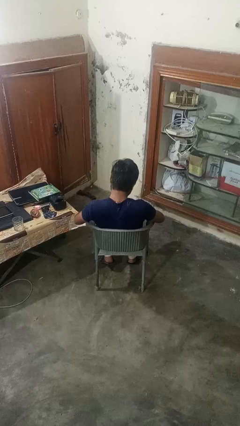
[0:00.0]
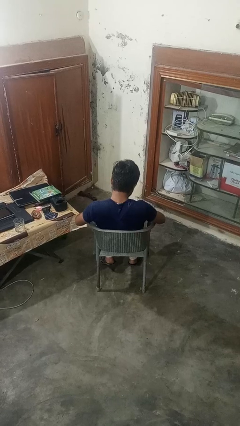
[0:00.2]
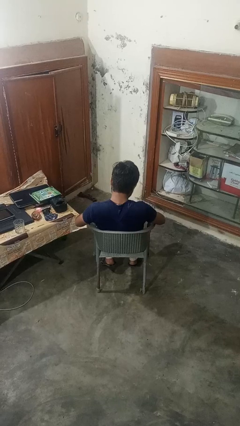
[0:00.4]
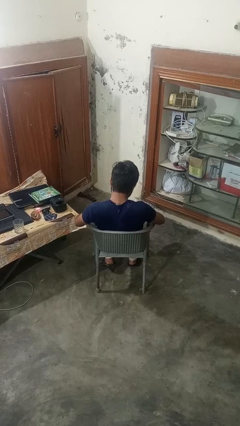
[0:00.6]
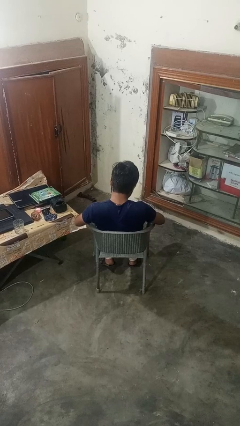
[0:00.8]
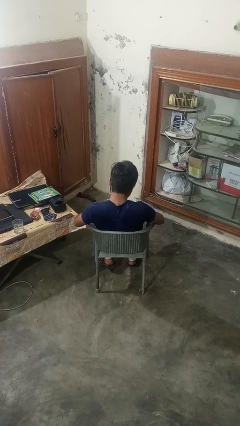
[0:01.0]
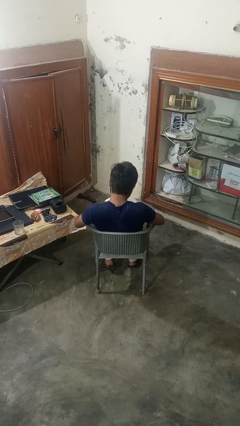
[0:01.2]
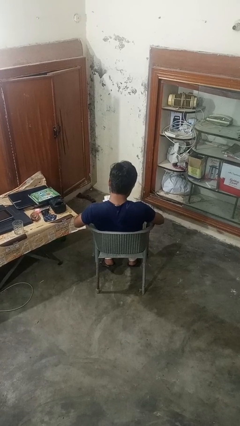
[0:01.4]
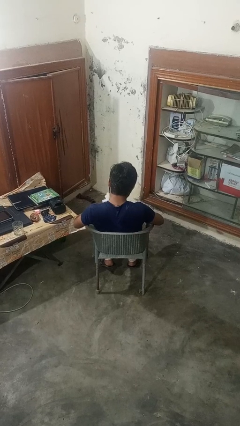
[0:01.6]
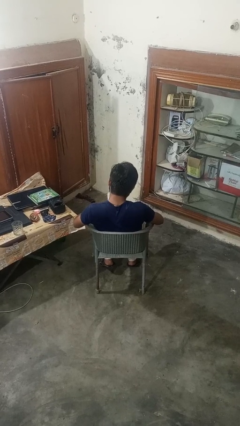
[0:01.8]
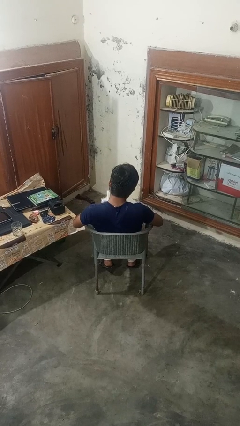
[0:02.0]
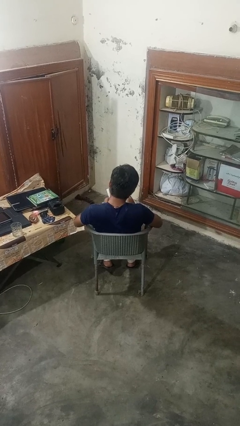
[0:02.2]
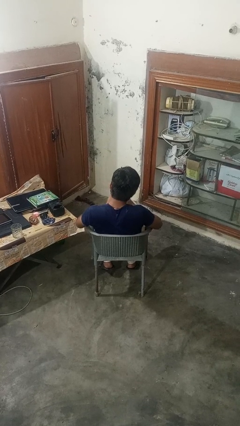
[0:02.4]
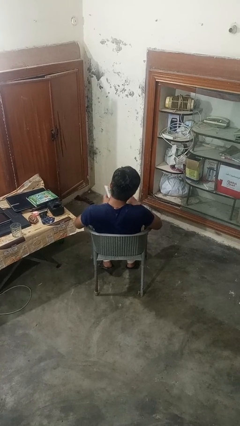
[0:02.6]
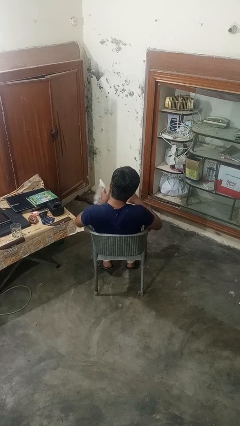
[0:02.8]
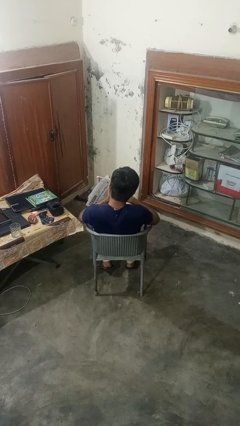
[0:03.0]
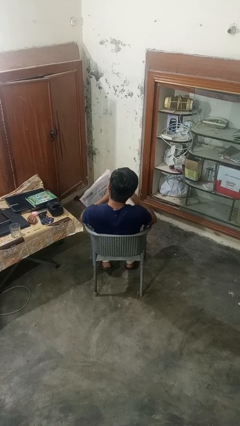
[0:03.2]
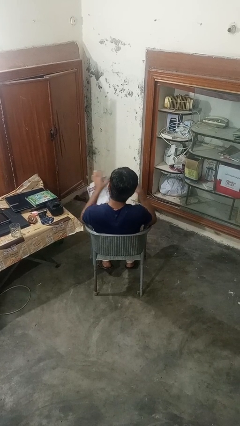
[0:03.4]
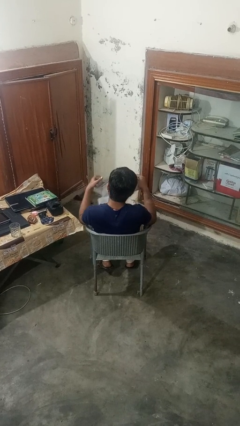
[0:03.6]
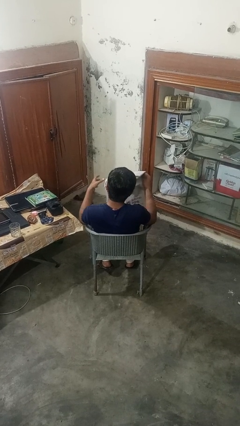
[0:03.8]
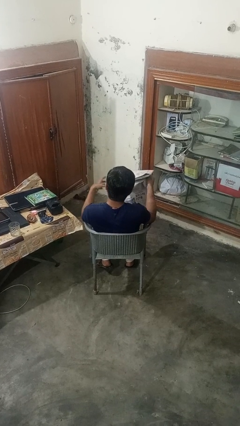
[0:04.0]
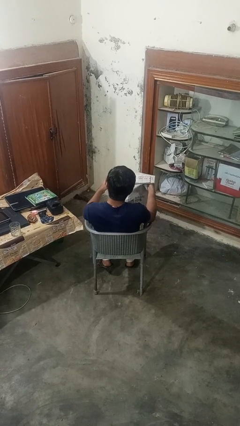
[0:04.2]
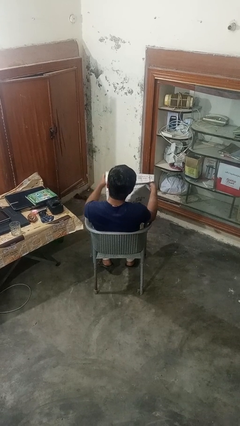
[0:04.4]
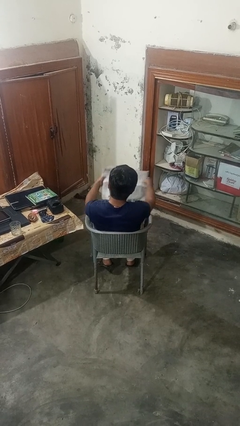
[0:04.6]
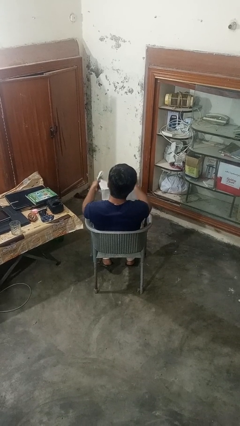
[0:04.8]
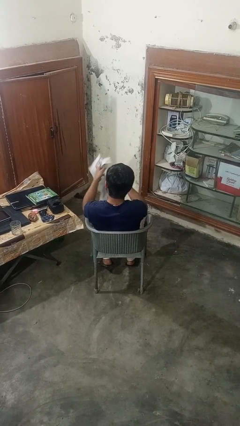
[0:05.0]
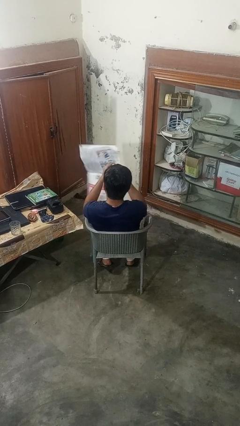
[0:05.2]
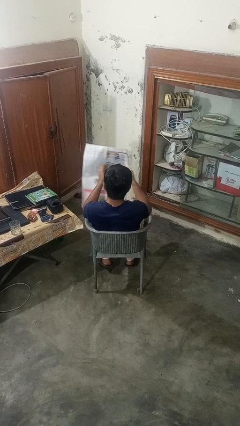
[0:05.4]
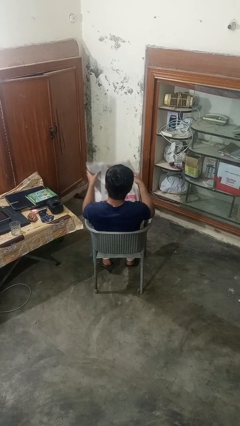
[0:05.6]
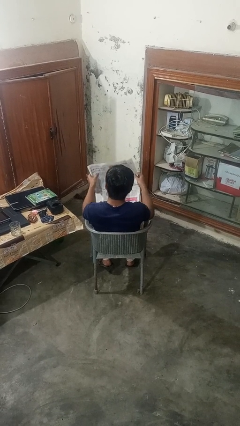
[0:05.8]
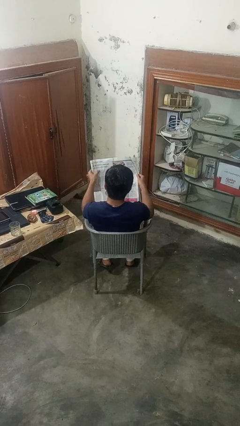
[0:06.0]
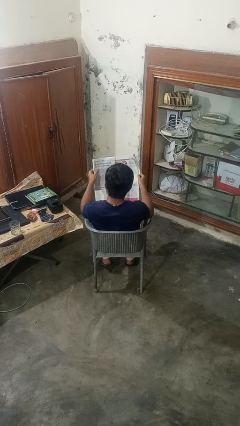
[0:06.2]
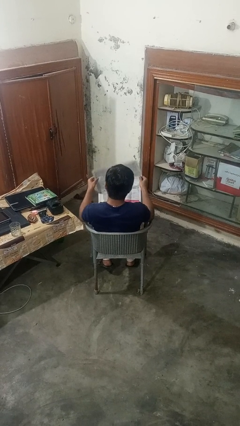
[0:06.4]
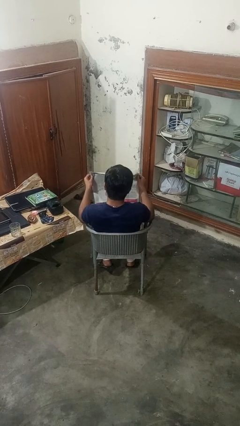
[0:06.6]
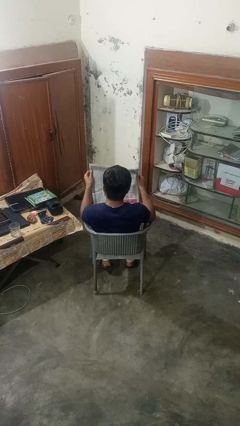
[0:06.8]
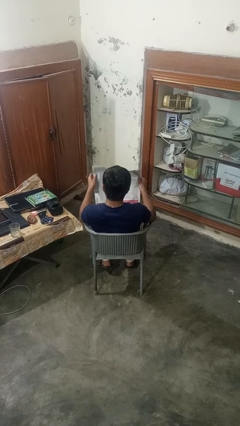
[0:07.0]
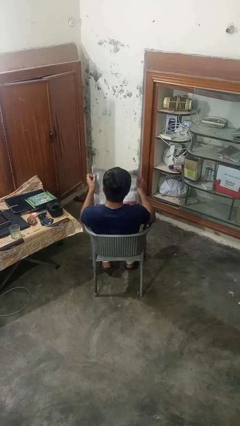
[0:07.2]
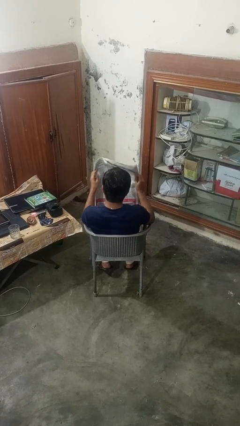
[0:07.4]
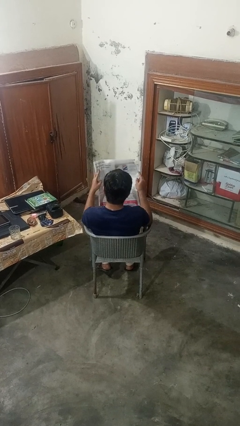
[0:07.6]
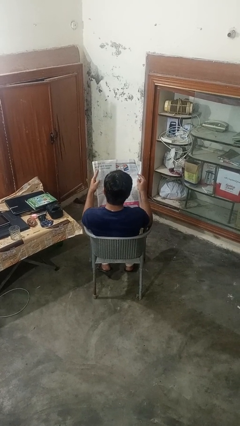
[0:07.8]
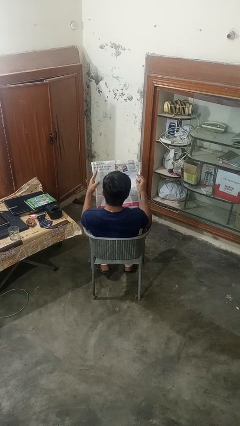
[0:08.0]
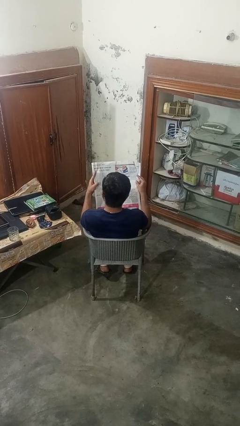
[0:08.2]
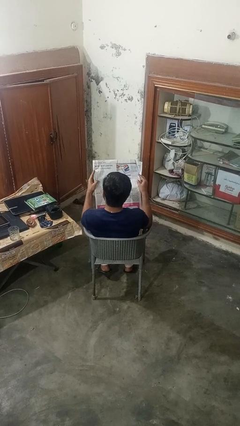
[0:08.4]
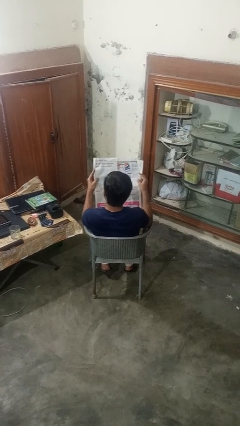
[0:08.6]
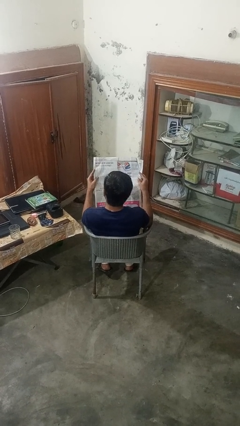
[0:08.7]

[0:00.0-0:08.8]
person reads newspaper

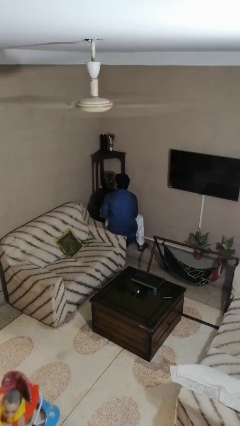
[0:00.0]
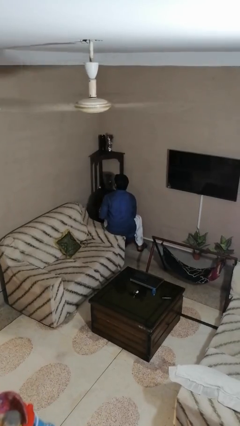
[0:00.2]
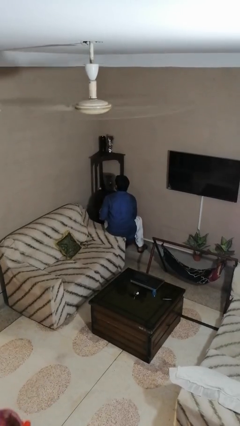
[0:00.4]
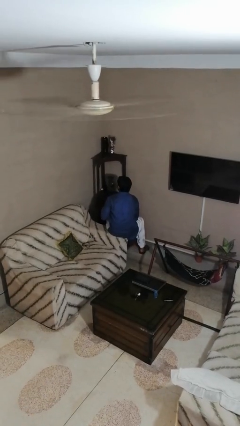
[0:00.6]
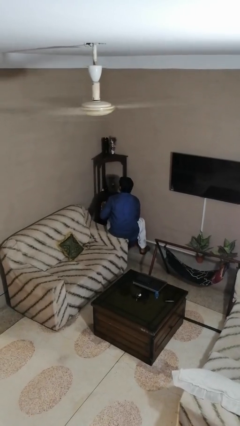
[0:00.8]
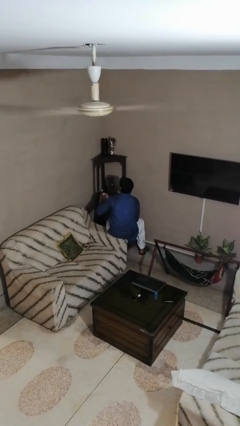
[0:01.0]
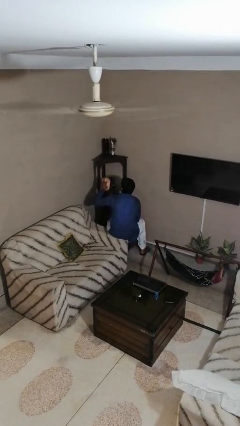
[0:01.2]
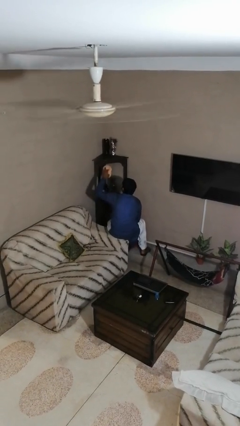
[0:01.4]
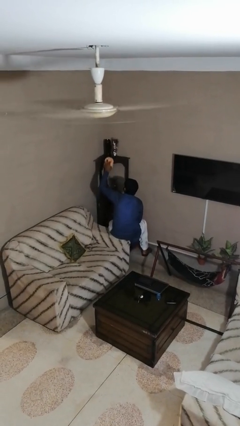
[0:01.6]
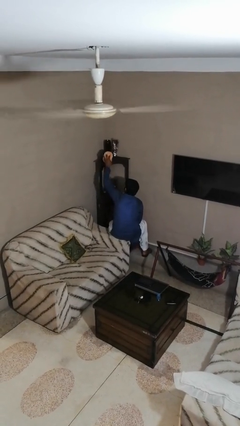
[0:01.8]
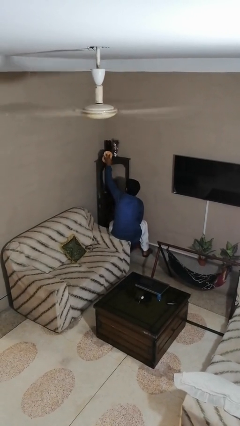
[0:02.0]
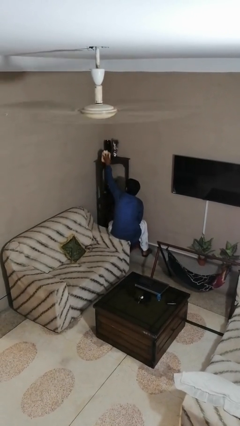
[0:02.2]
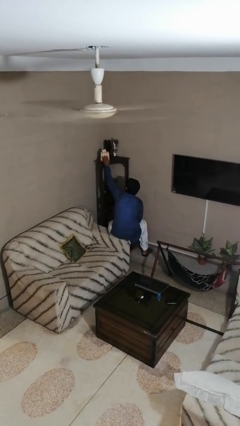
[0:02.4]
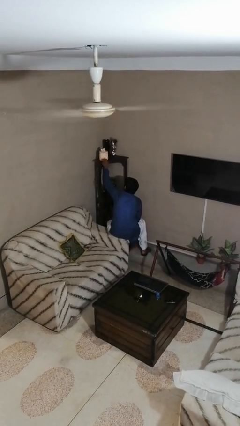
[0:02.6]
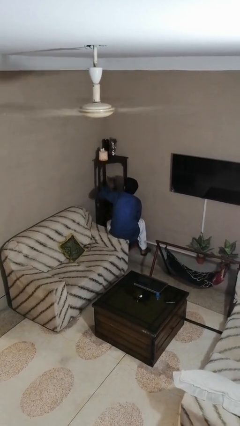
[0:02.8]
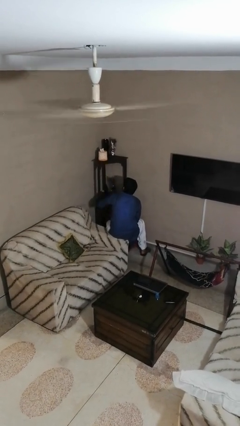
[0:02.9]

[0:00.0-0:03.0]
person puts down object on shelf

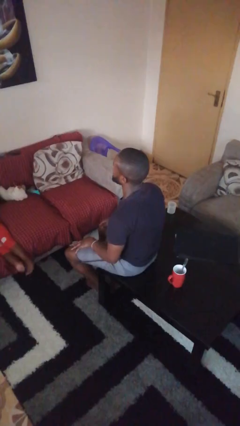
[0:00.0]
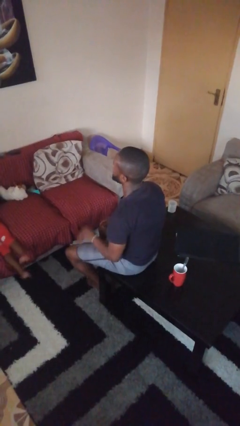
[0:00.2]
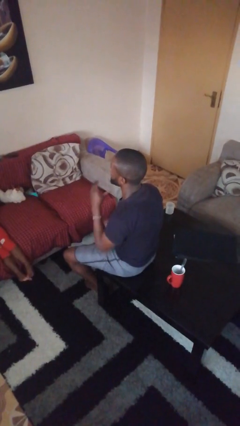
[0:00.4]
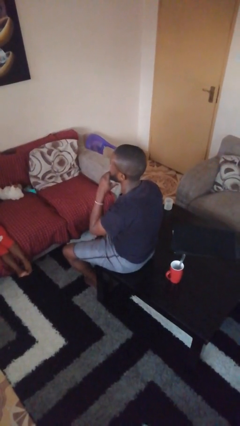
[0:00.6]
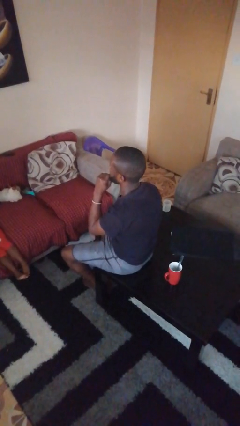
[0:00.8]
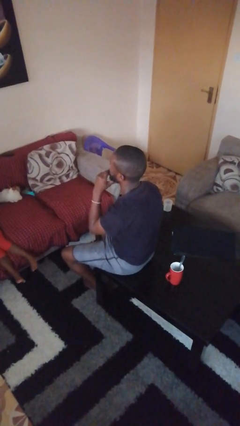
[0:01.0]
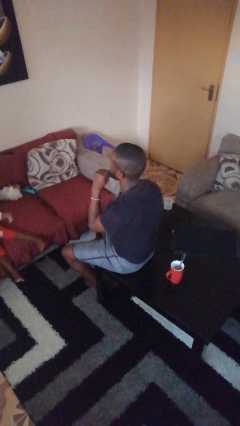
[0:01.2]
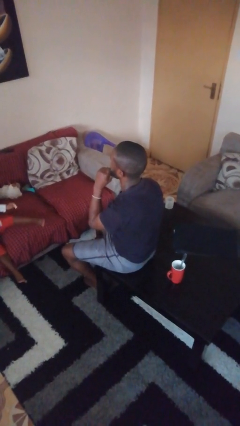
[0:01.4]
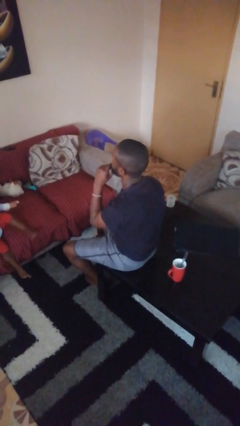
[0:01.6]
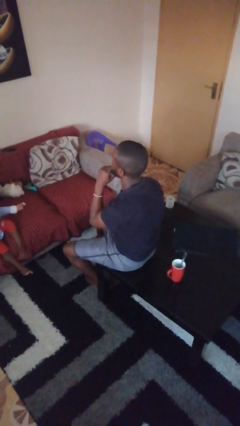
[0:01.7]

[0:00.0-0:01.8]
person strokes chin

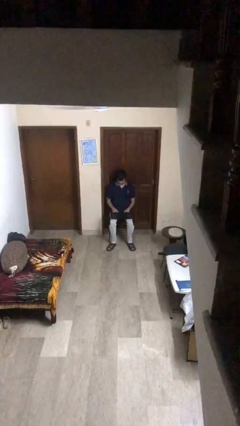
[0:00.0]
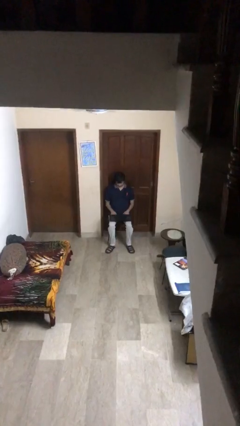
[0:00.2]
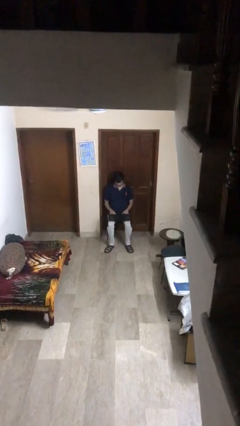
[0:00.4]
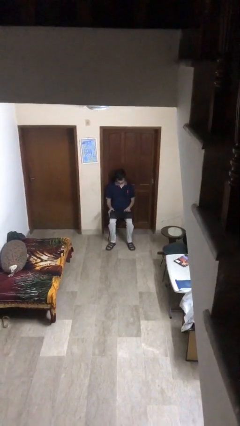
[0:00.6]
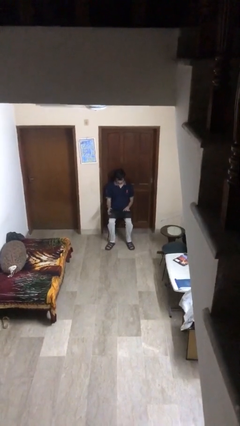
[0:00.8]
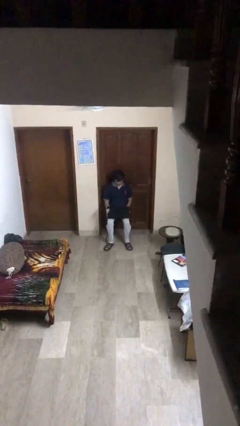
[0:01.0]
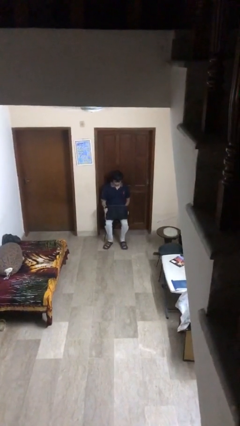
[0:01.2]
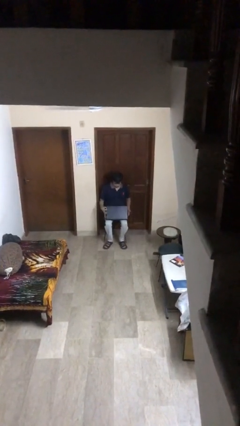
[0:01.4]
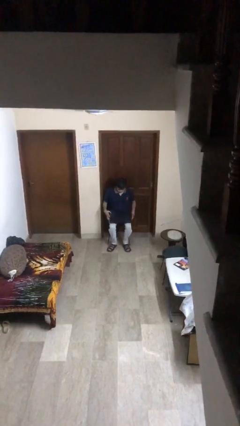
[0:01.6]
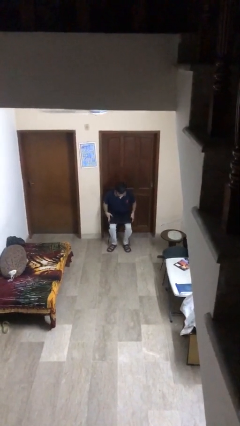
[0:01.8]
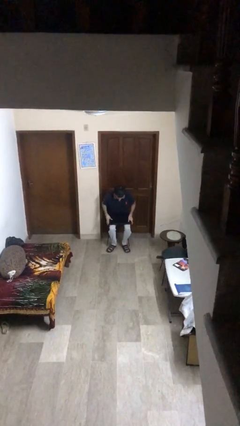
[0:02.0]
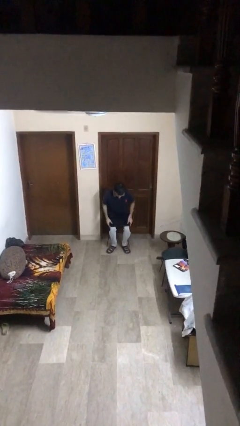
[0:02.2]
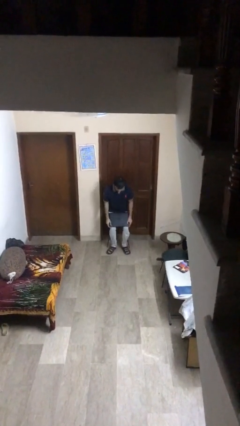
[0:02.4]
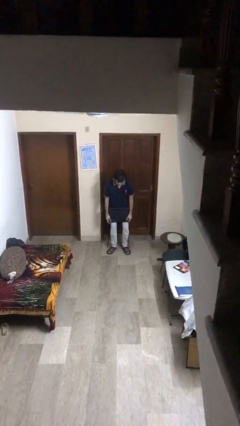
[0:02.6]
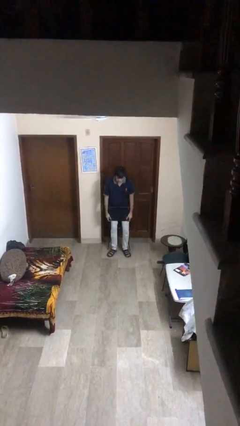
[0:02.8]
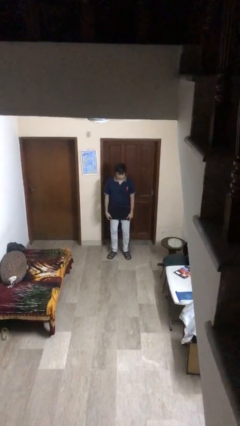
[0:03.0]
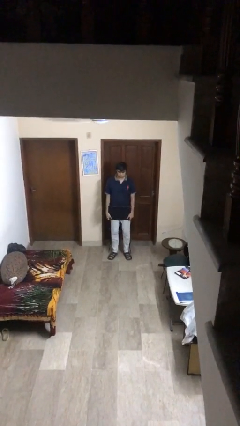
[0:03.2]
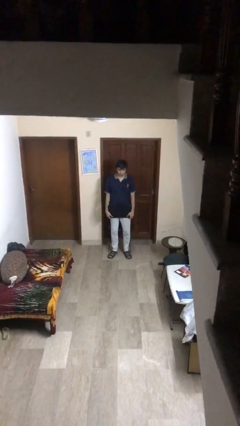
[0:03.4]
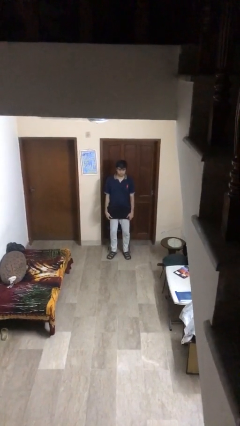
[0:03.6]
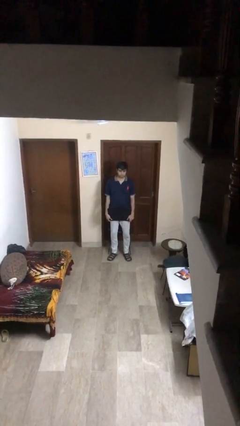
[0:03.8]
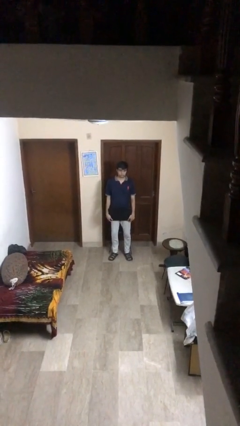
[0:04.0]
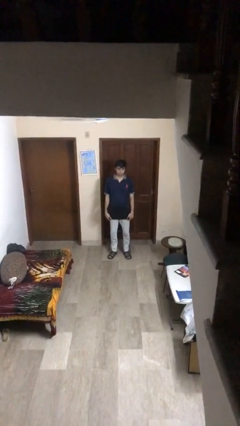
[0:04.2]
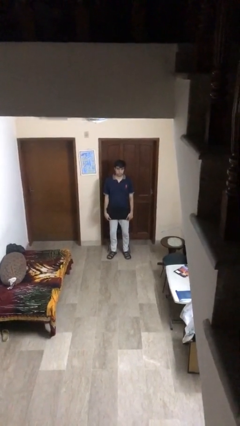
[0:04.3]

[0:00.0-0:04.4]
person stands up

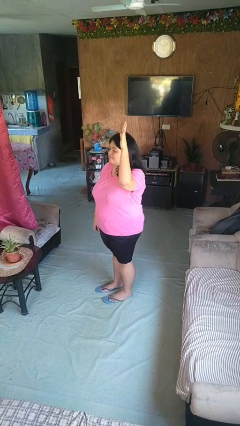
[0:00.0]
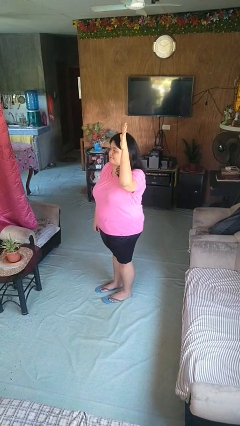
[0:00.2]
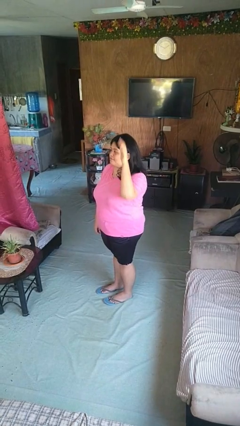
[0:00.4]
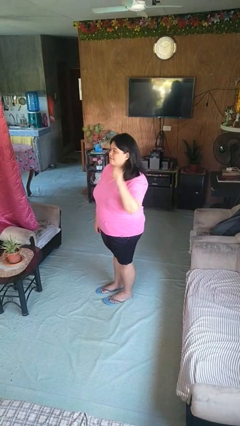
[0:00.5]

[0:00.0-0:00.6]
person gestures lower hand
